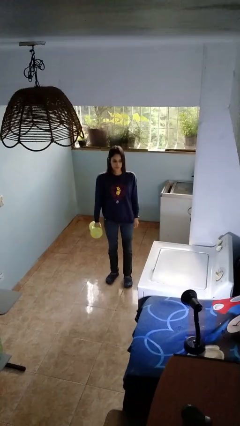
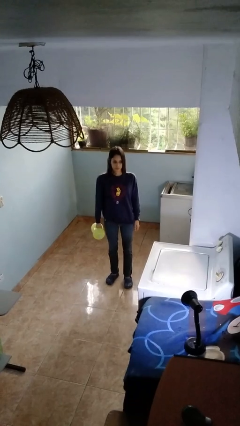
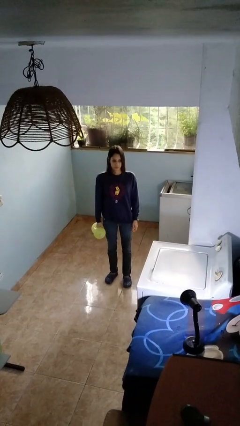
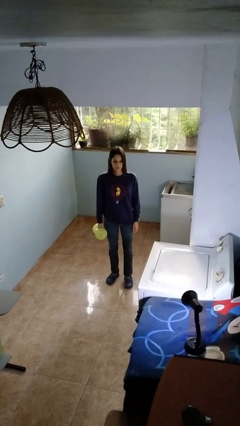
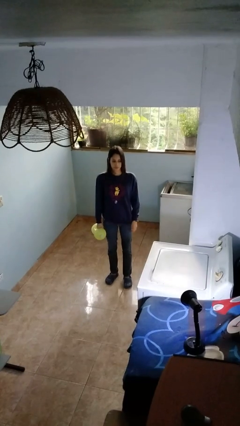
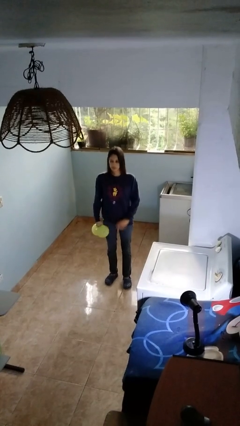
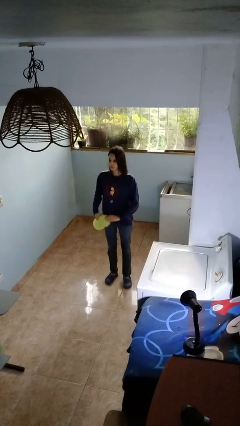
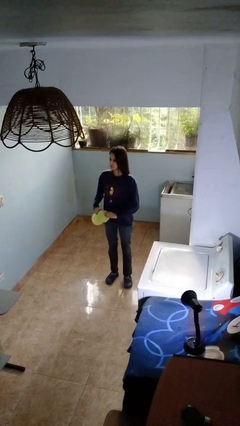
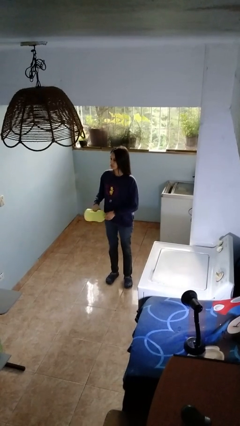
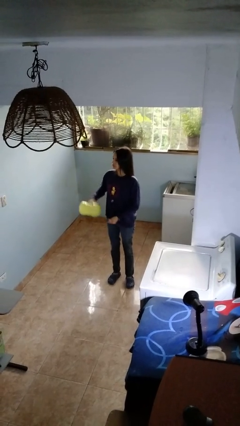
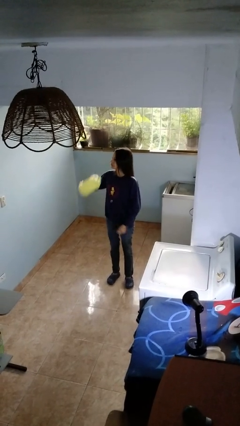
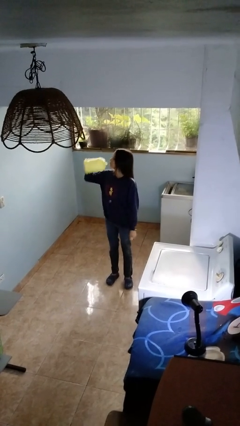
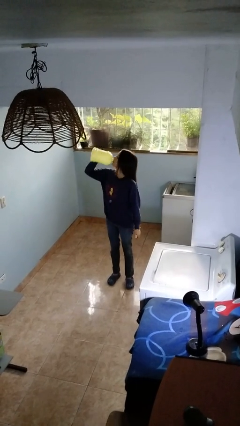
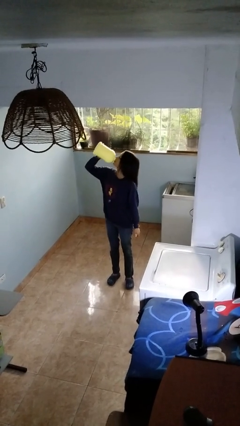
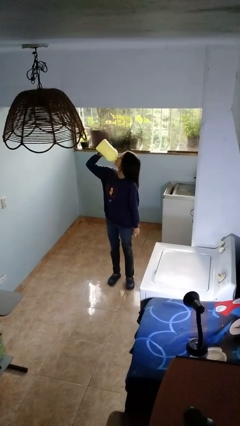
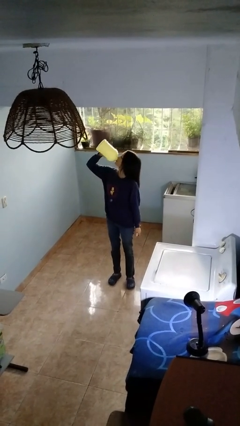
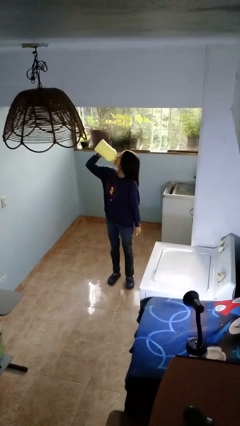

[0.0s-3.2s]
person drinks from bottle

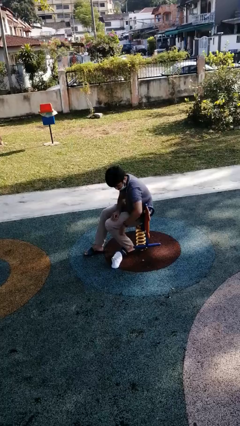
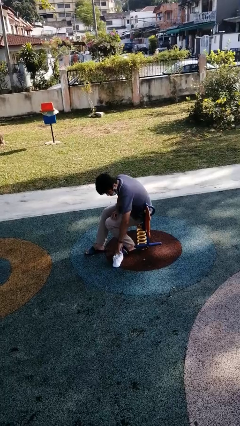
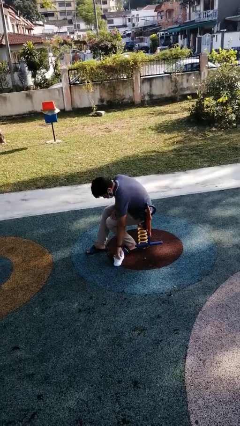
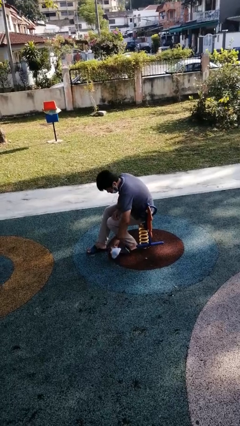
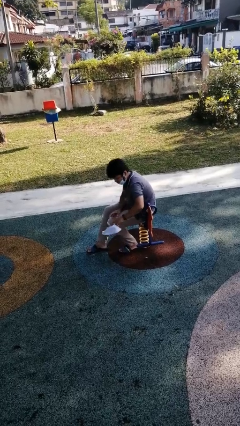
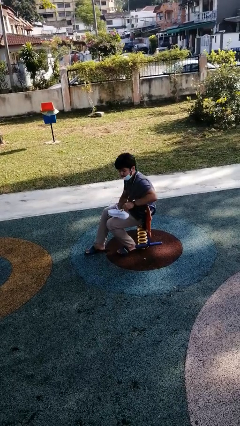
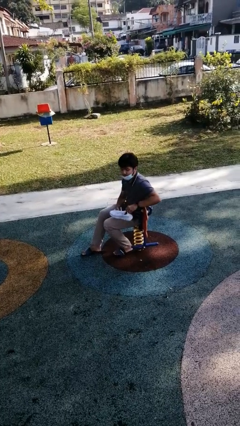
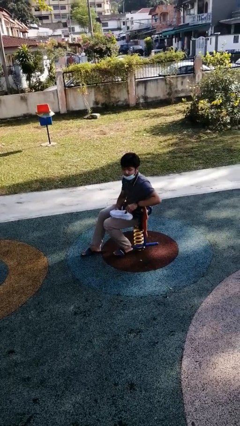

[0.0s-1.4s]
person picks up object from floor

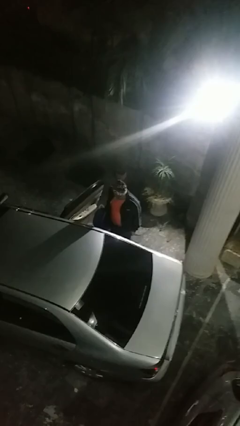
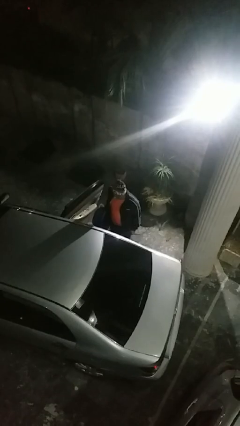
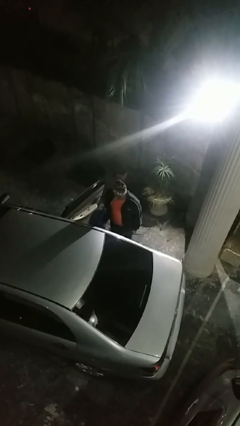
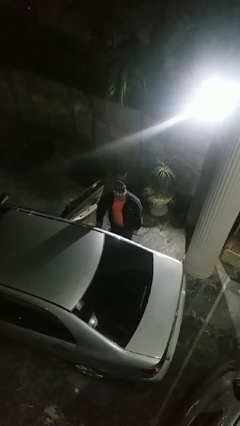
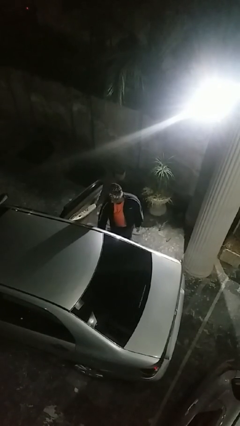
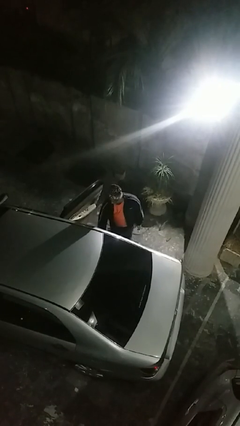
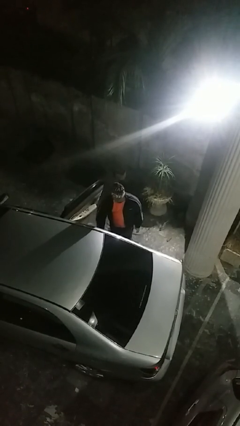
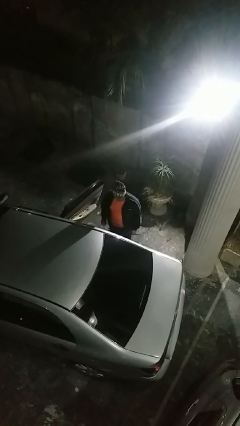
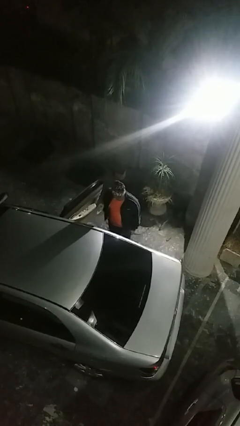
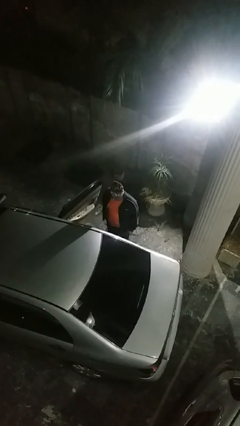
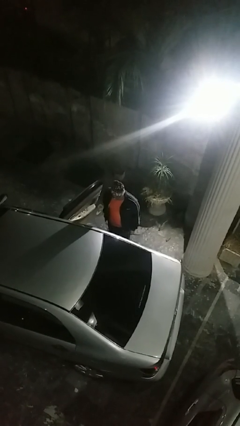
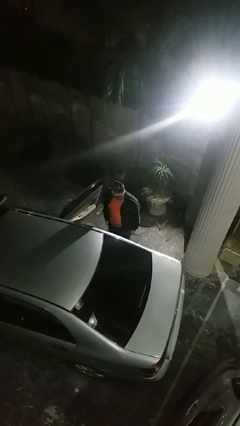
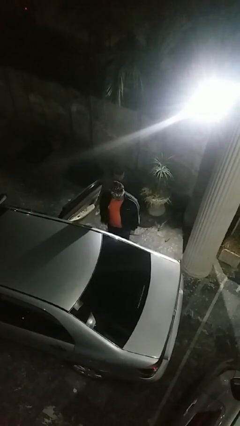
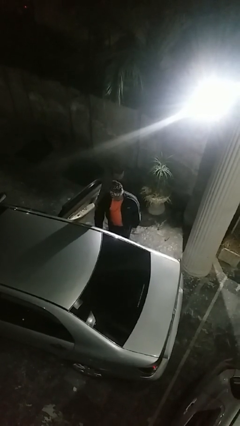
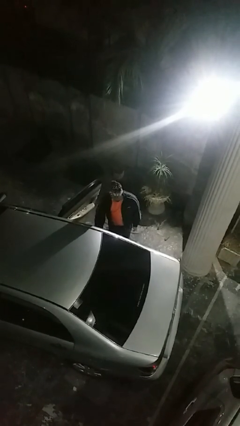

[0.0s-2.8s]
person loads car

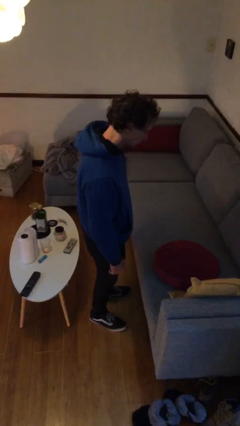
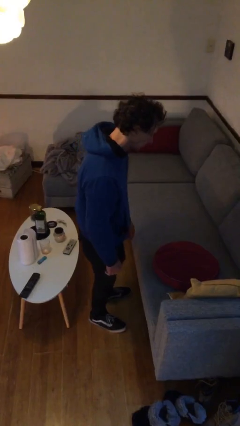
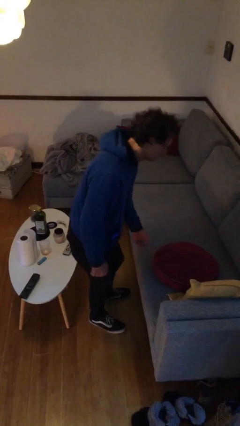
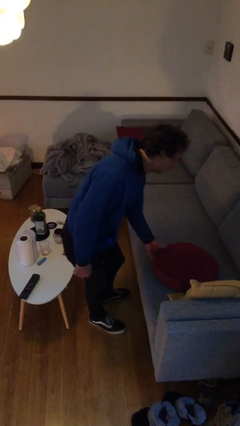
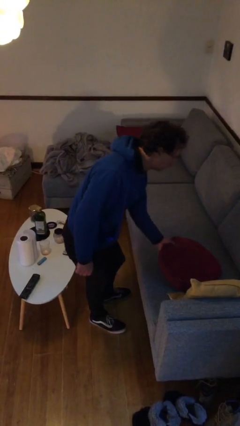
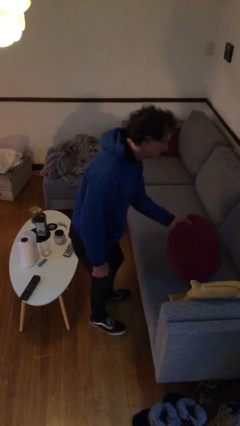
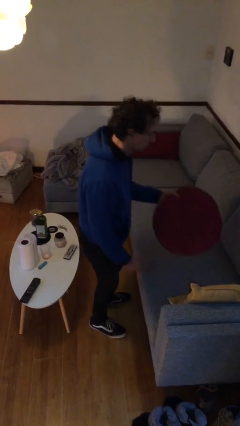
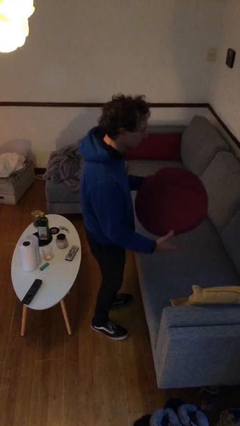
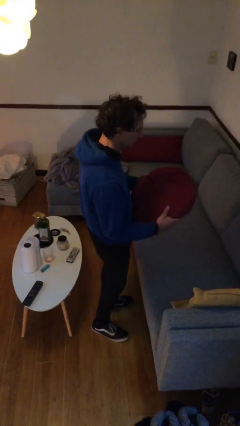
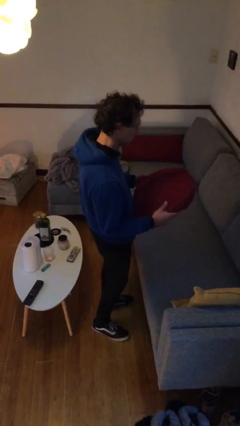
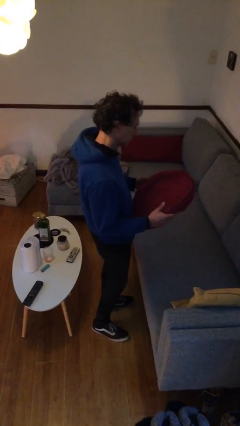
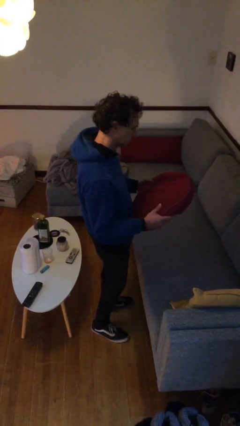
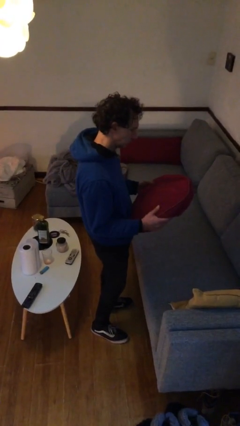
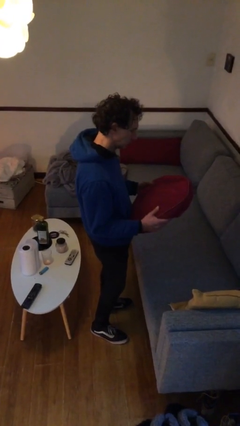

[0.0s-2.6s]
person picks up object from couch

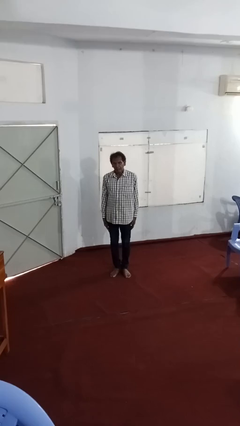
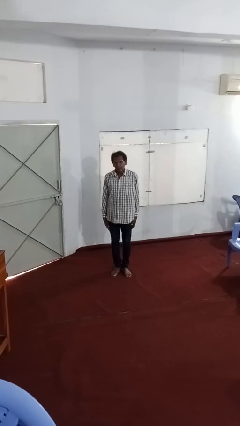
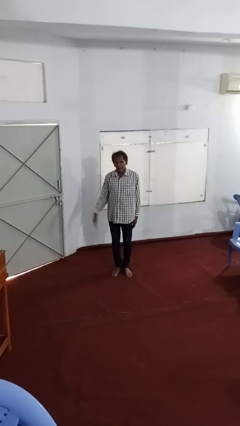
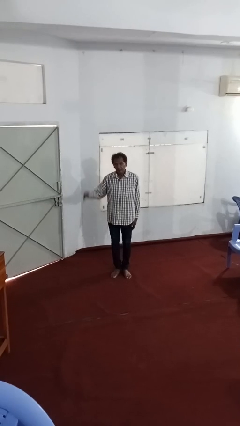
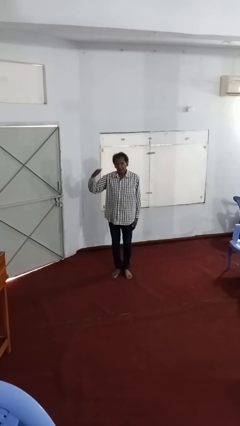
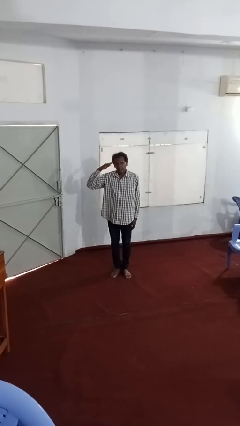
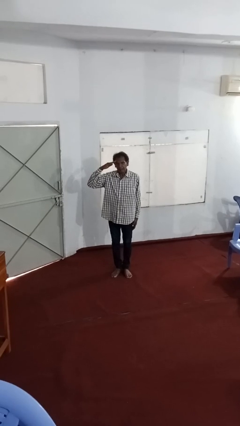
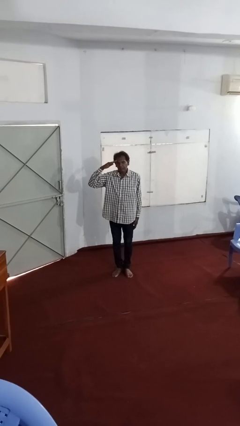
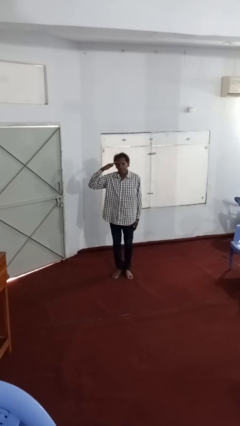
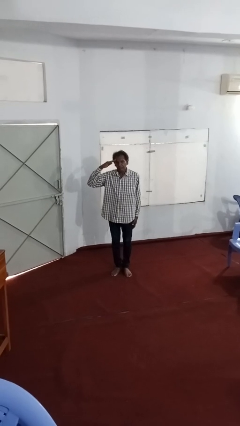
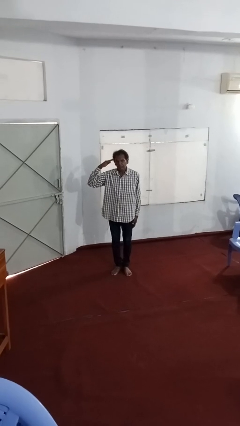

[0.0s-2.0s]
person salutes

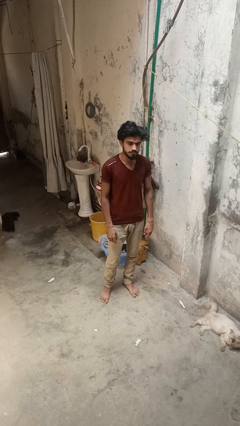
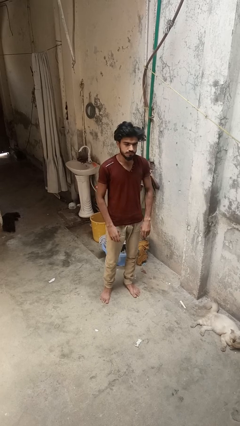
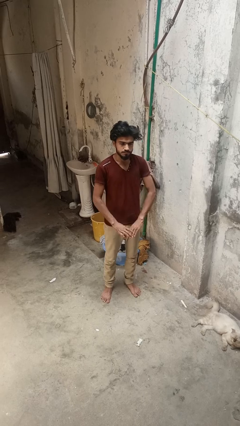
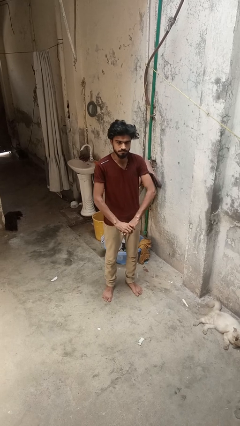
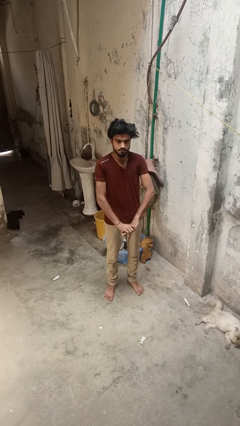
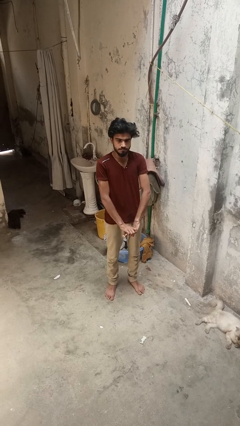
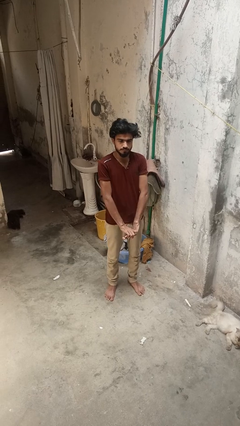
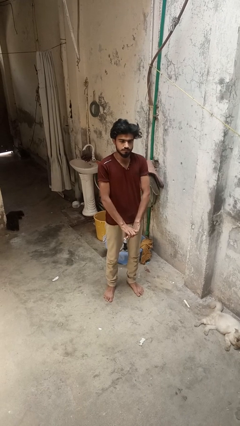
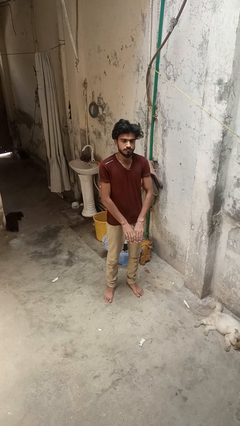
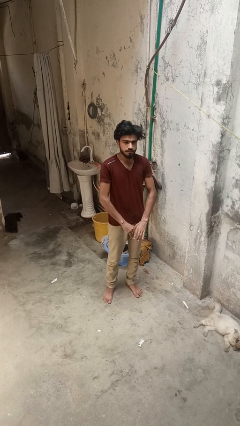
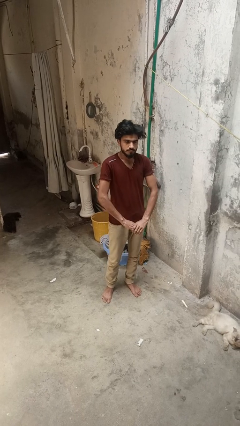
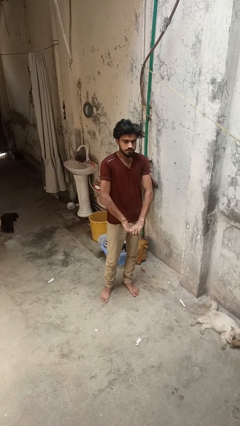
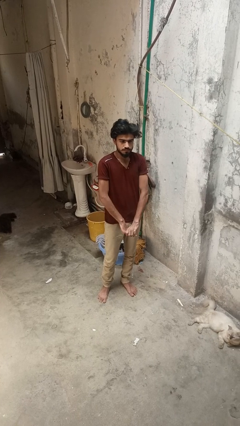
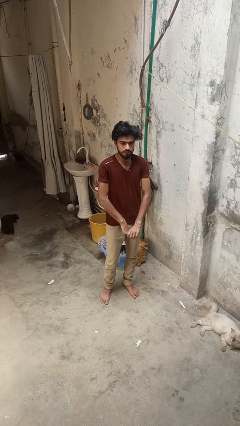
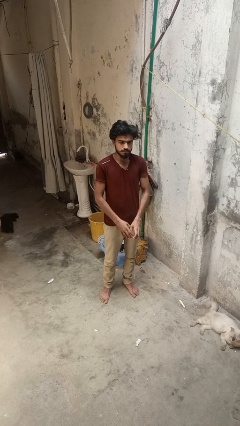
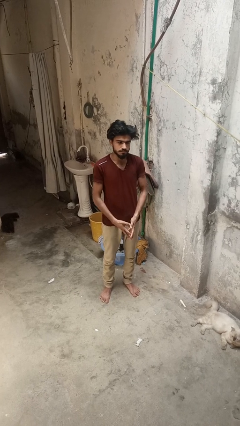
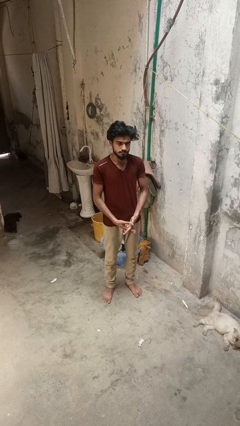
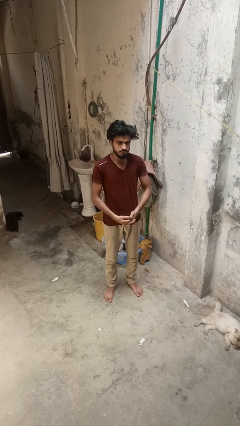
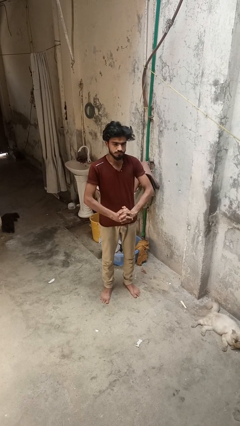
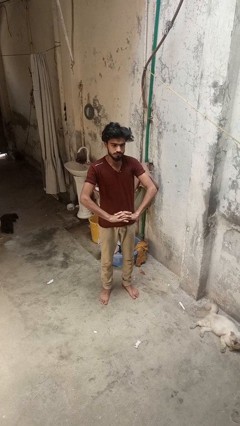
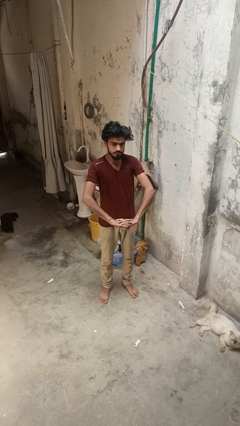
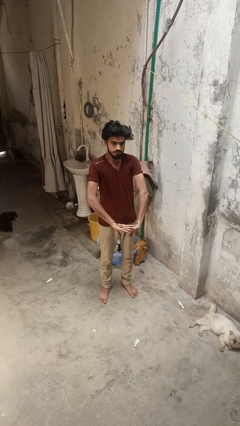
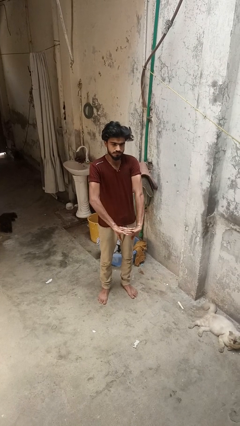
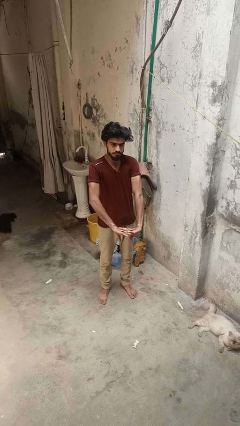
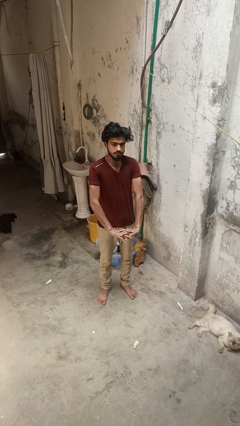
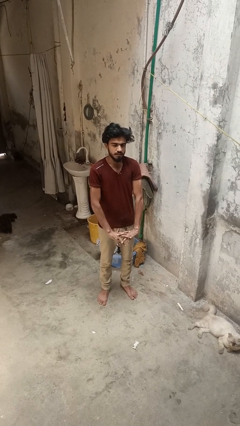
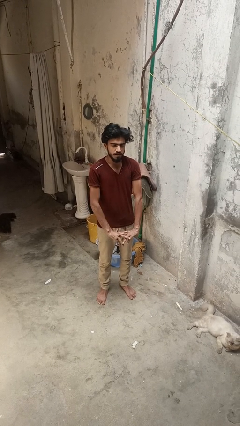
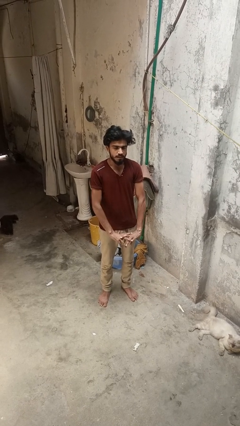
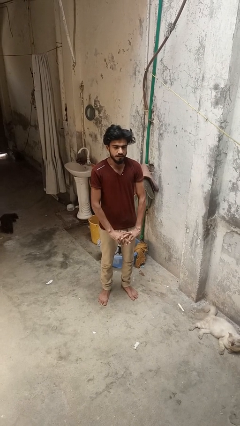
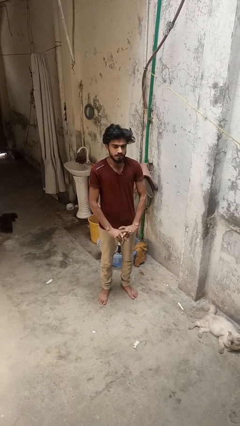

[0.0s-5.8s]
person cracks knuckles
